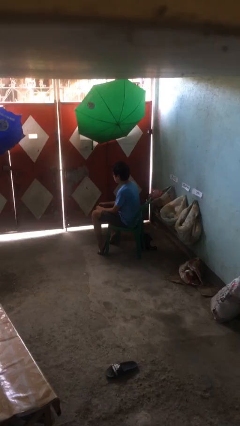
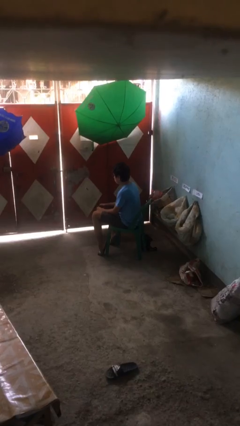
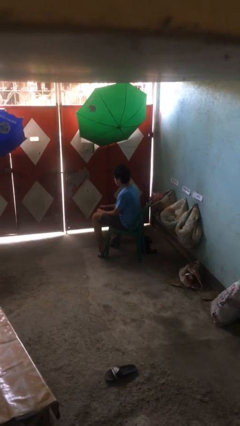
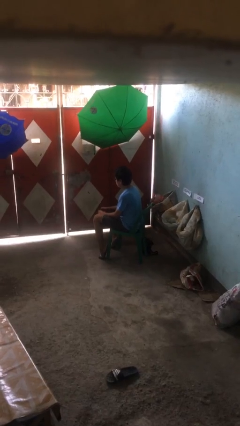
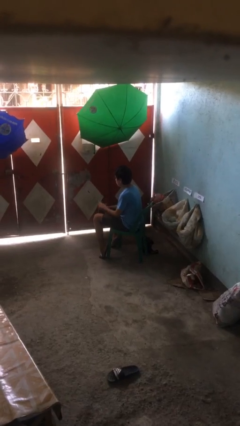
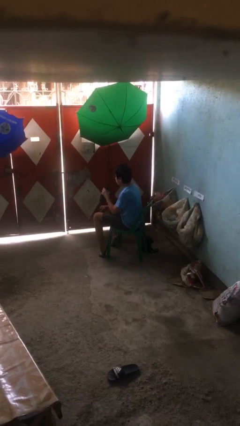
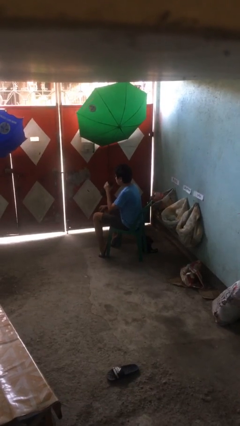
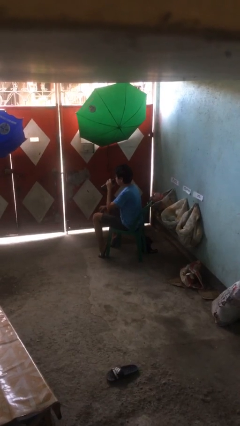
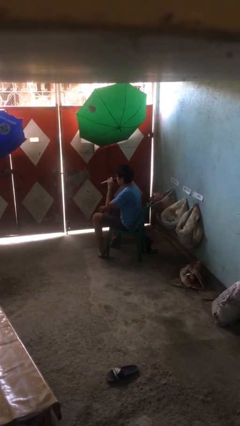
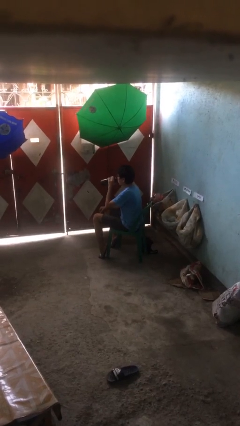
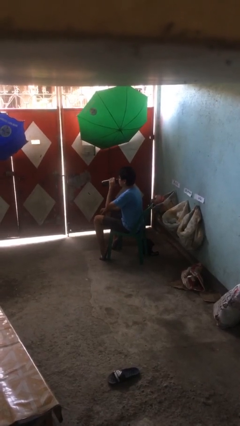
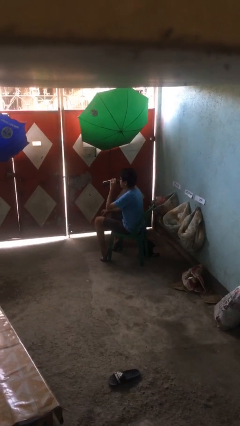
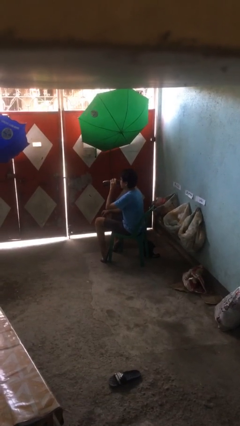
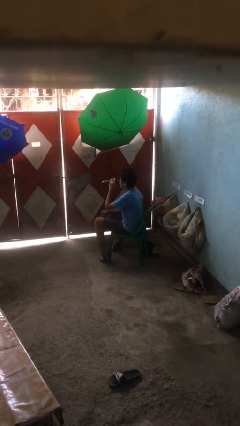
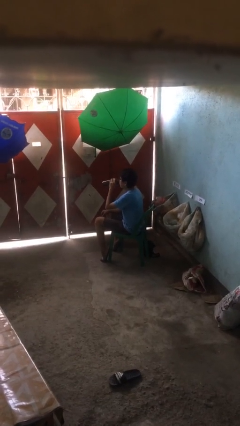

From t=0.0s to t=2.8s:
person drinks from bottle

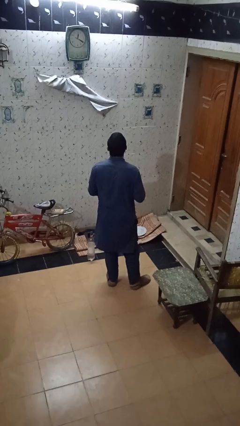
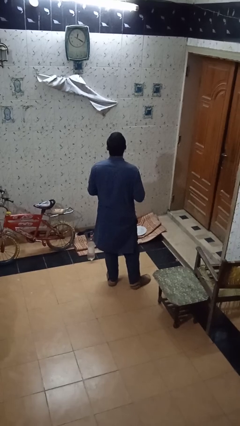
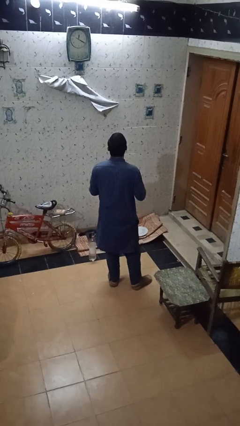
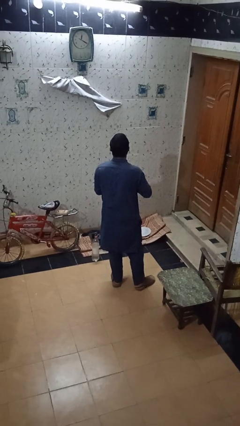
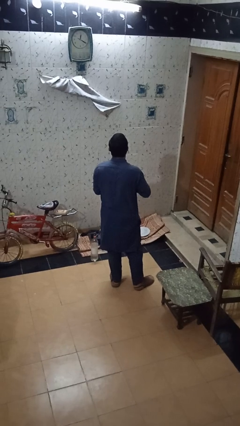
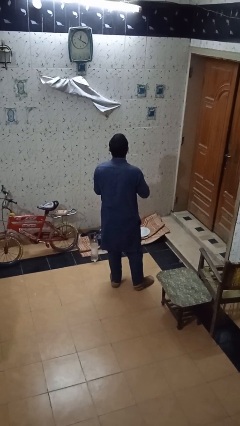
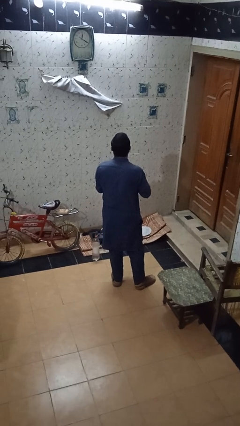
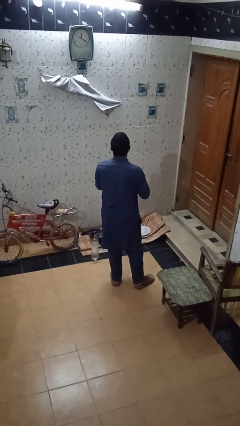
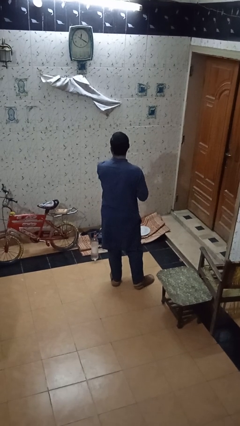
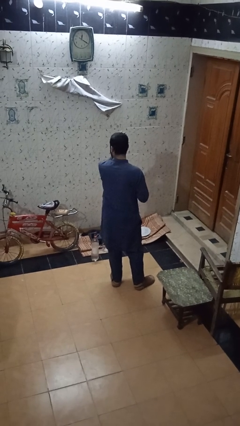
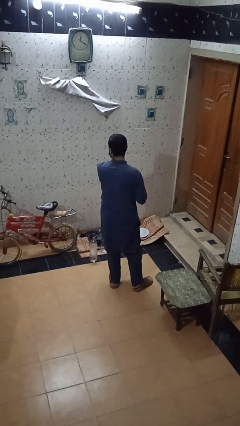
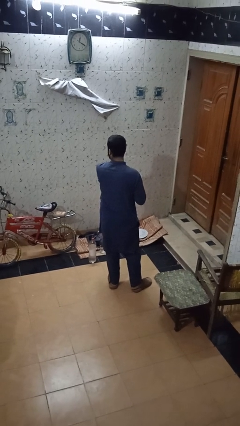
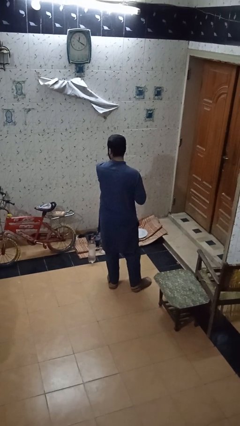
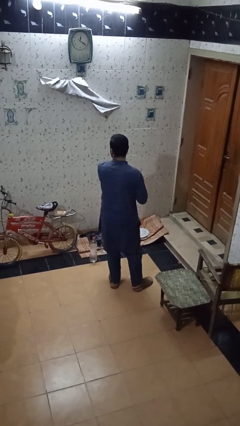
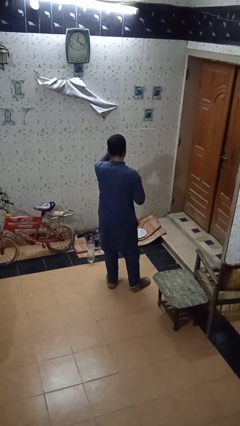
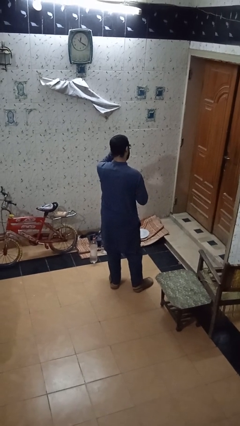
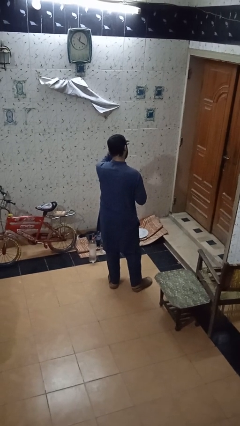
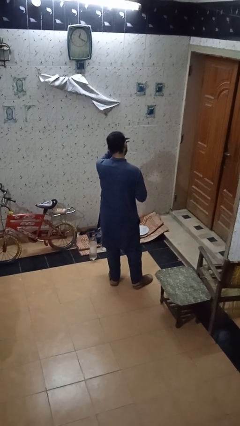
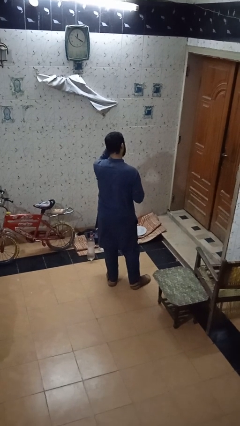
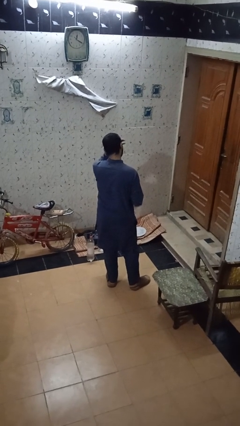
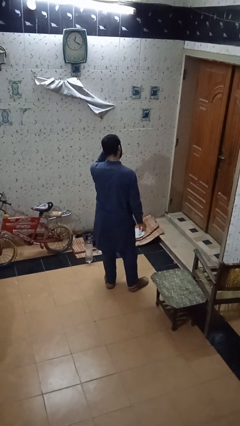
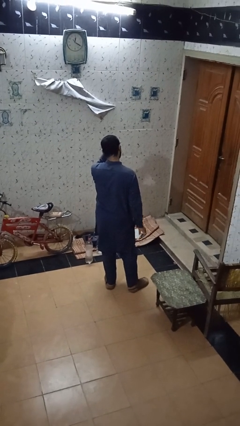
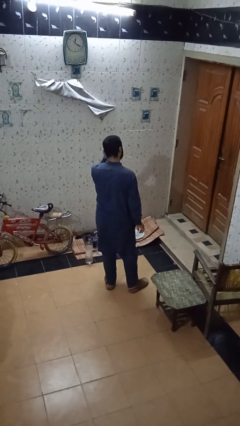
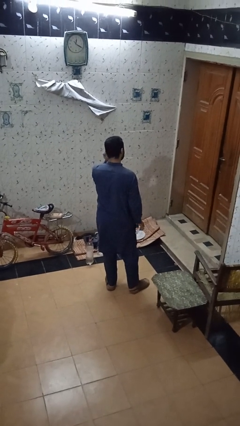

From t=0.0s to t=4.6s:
person applies sunscreen

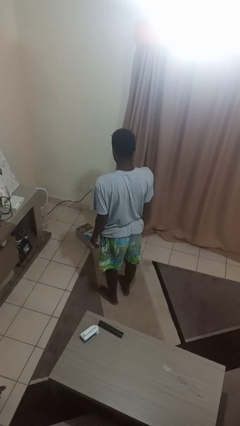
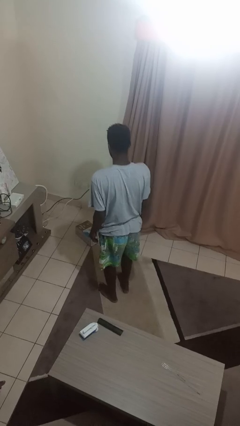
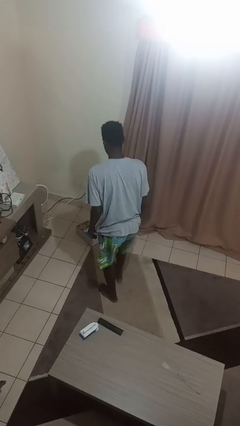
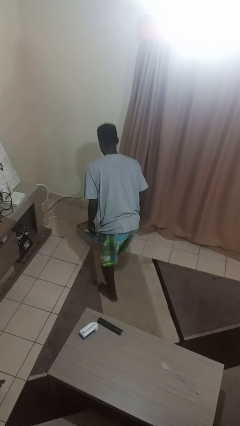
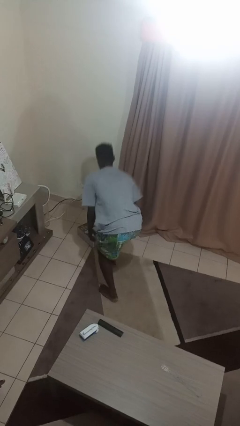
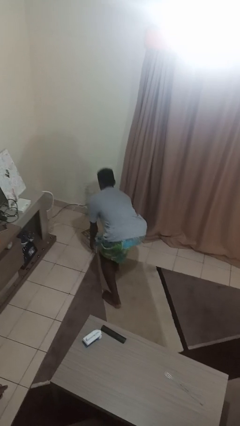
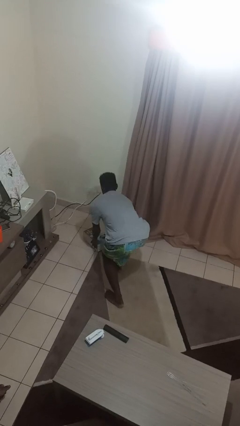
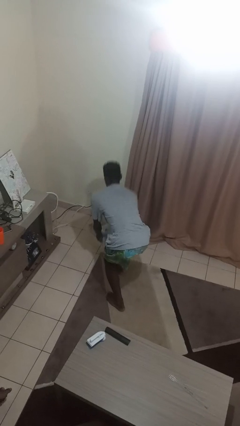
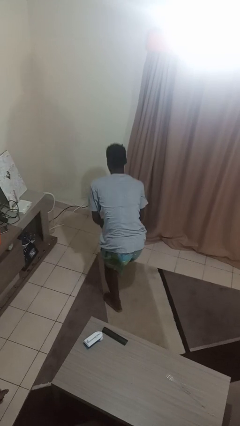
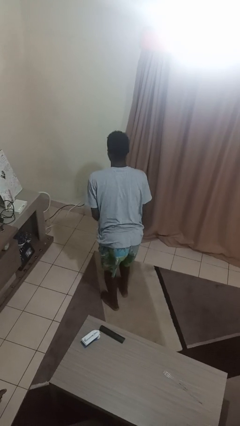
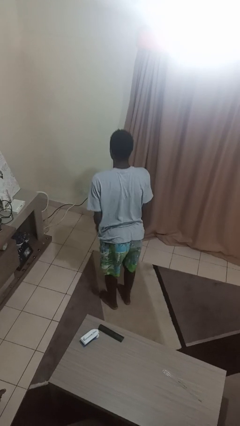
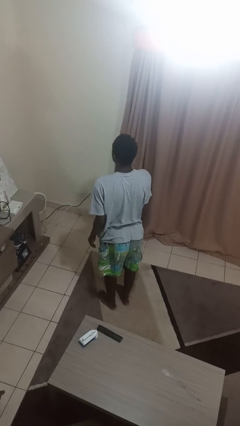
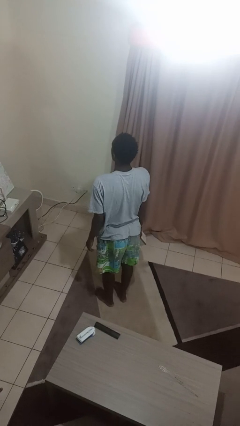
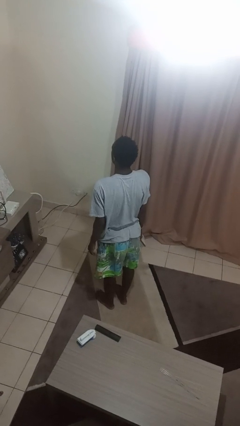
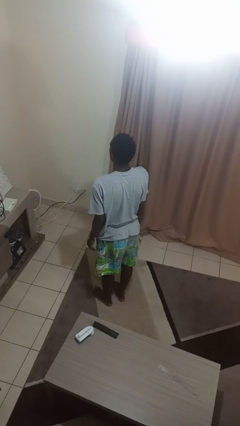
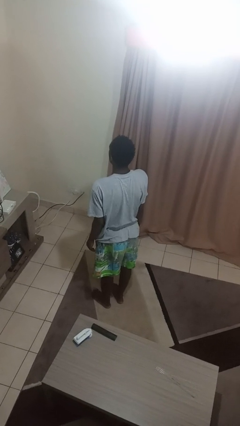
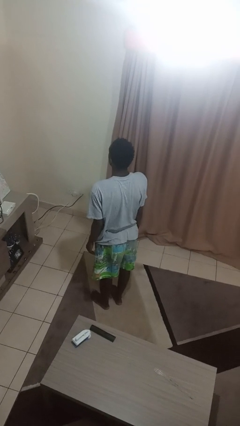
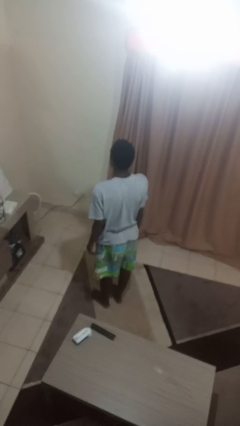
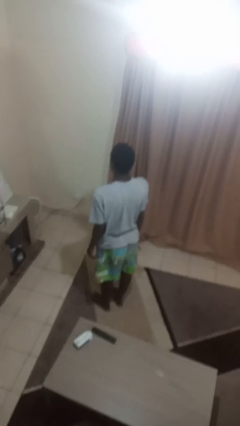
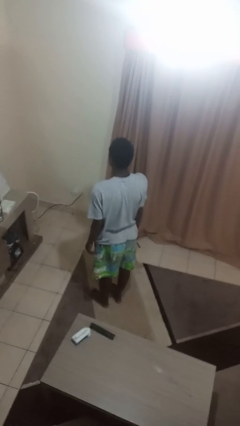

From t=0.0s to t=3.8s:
person picks up object from floor

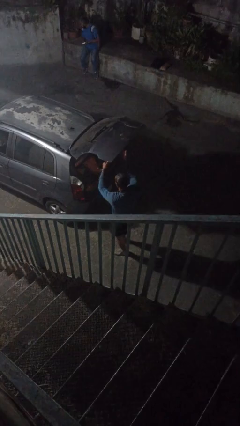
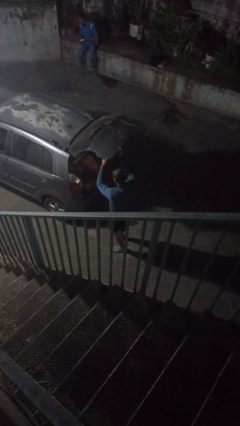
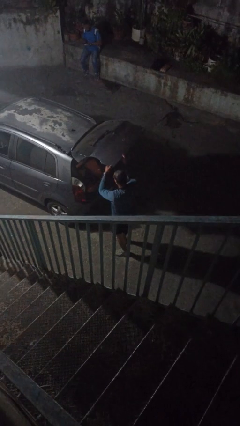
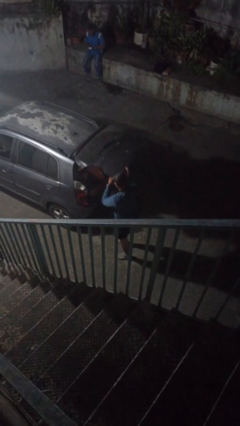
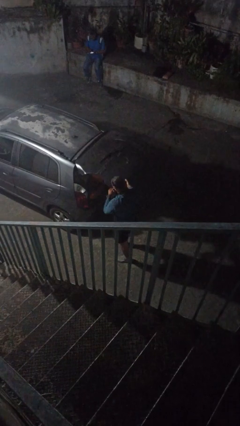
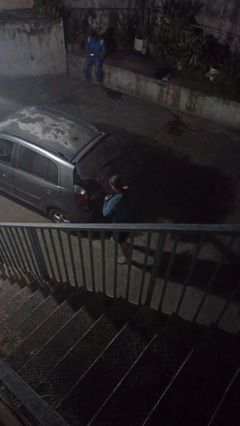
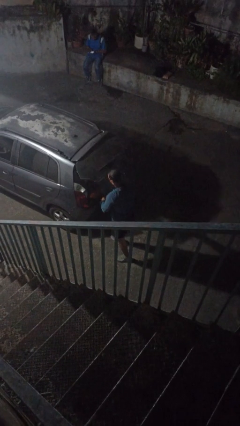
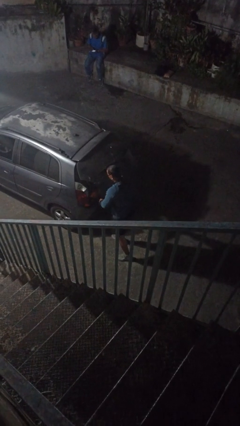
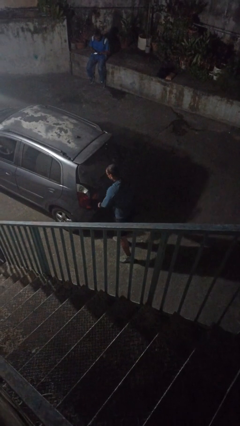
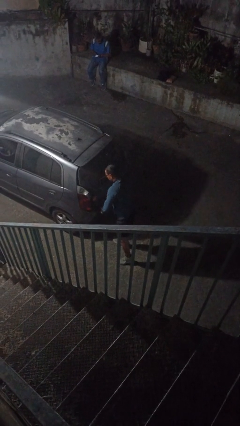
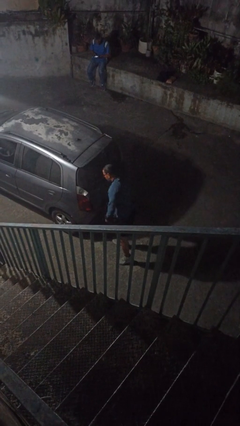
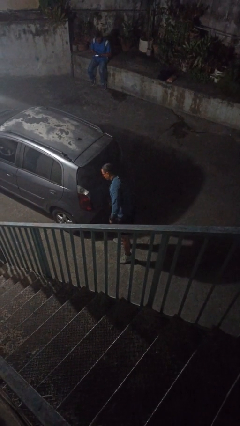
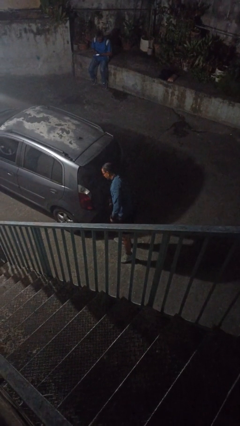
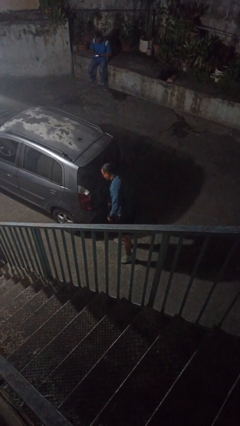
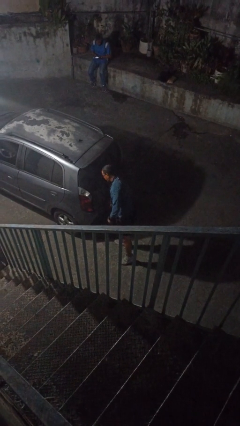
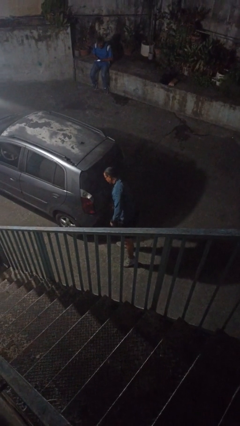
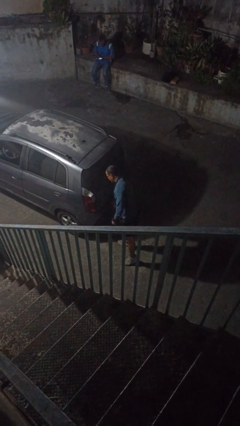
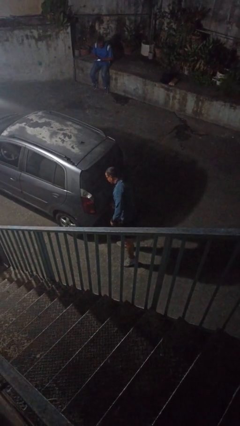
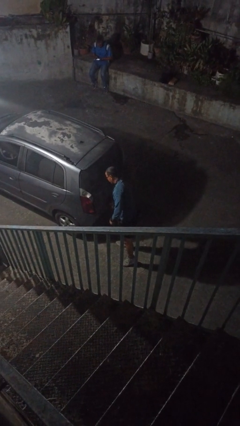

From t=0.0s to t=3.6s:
person closes car trunk

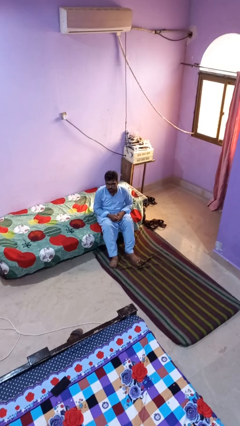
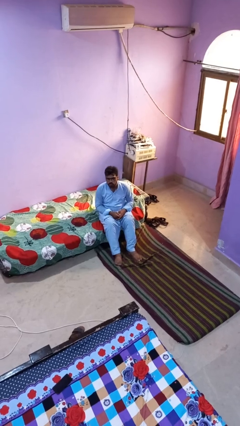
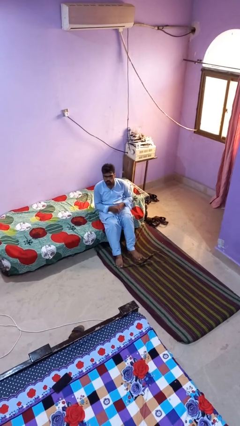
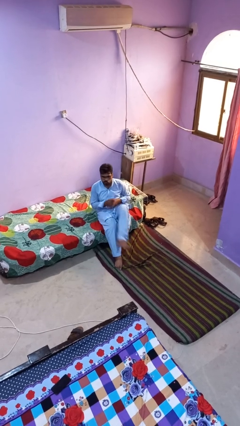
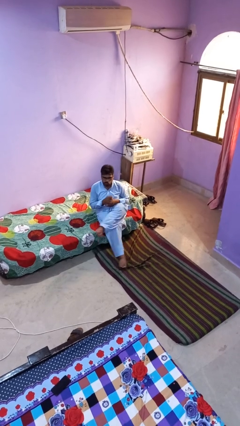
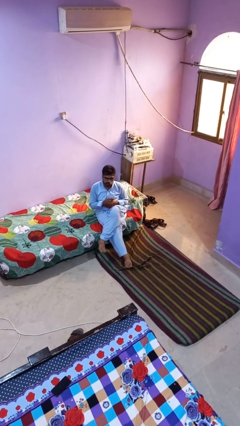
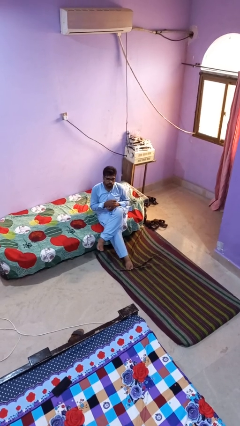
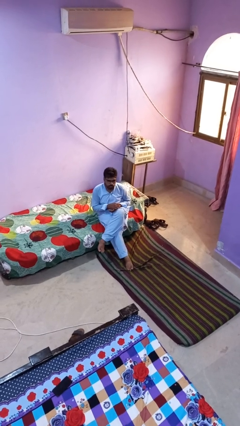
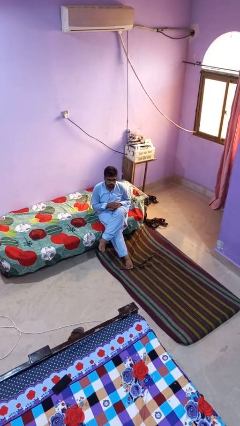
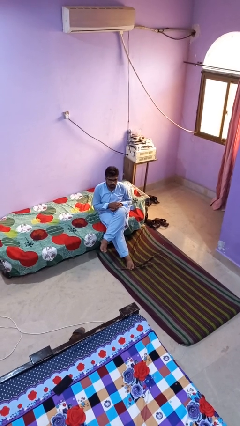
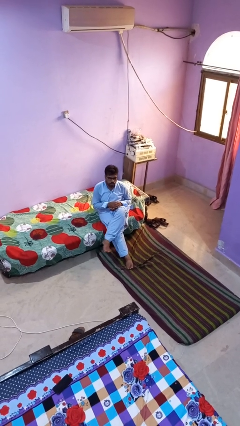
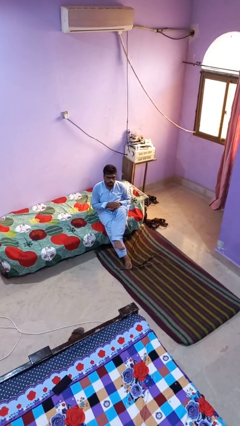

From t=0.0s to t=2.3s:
person crosses legs

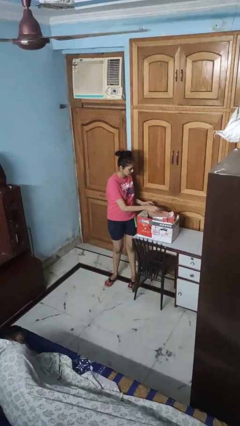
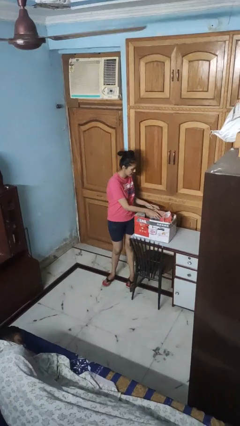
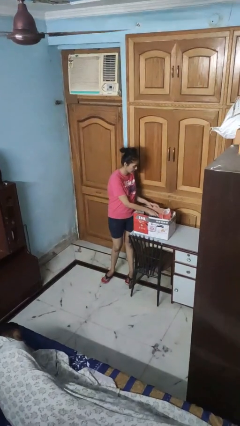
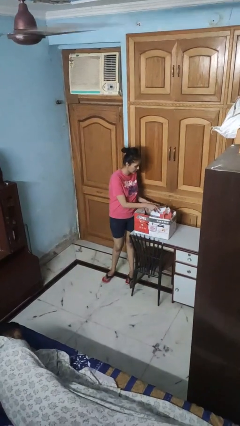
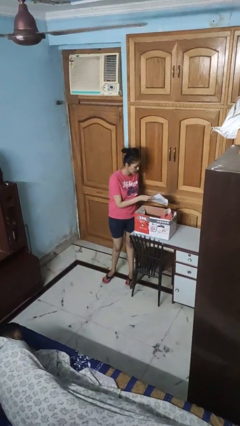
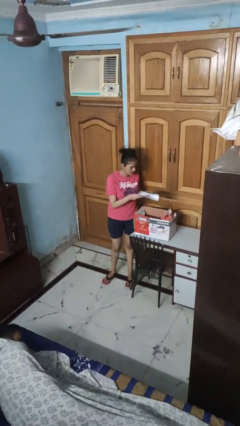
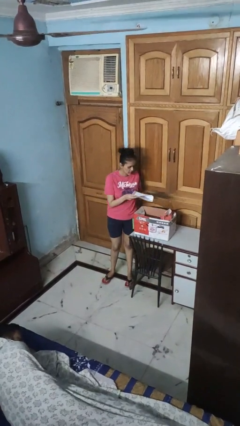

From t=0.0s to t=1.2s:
person takes object from box
